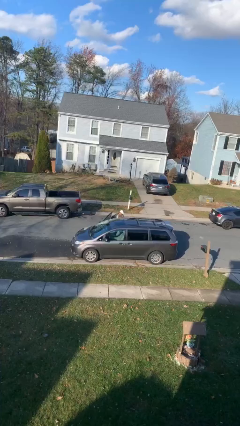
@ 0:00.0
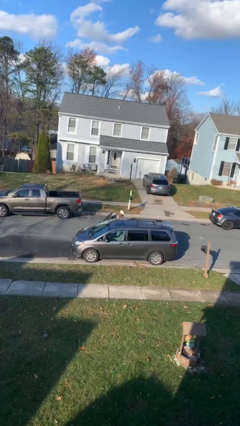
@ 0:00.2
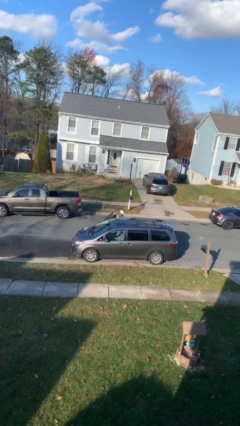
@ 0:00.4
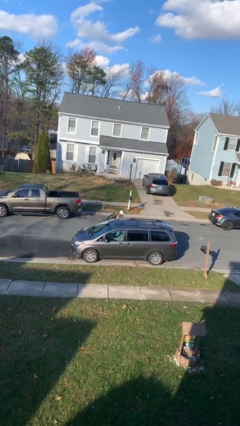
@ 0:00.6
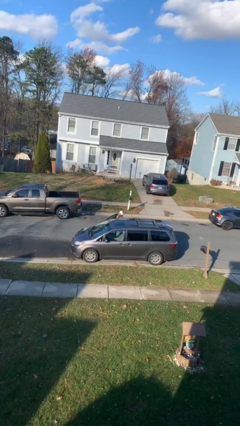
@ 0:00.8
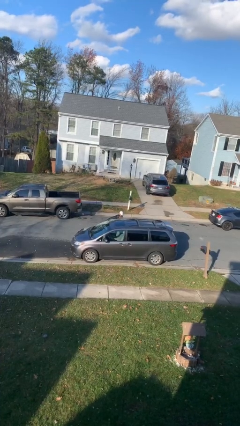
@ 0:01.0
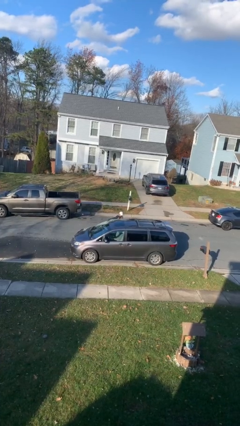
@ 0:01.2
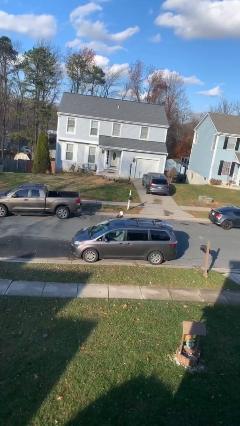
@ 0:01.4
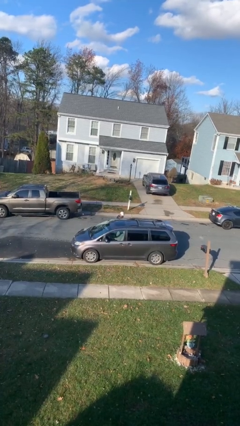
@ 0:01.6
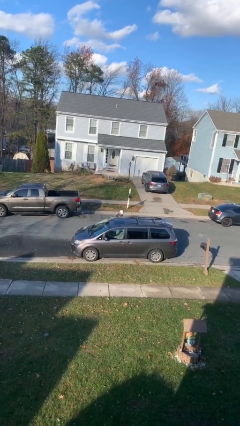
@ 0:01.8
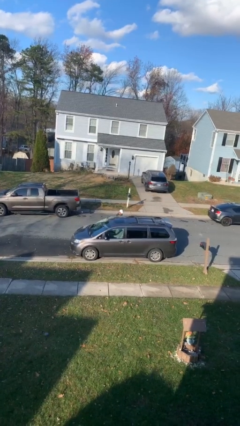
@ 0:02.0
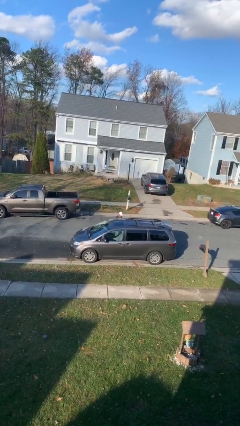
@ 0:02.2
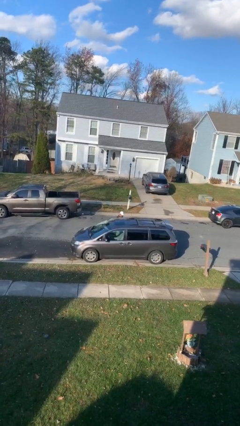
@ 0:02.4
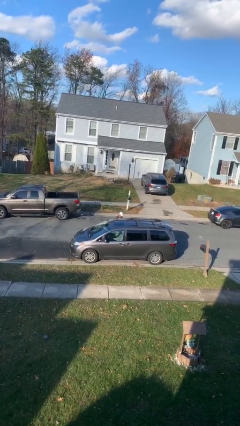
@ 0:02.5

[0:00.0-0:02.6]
person closes car door

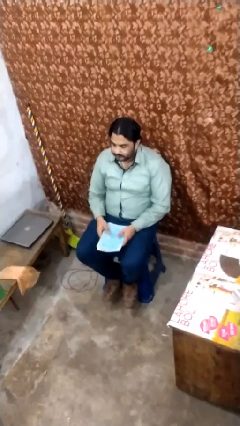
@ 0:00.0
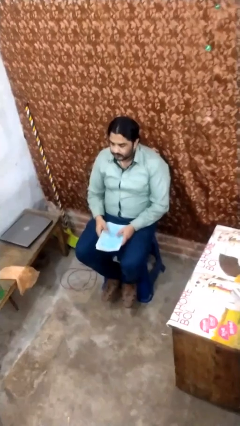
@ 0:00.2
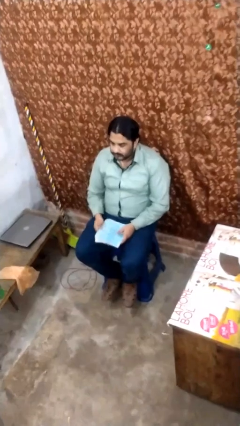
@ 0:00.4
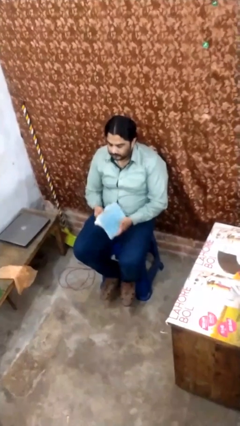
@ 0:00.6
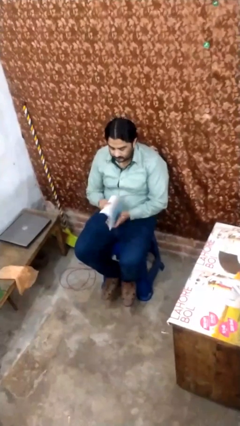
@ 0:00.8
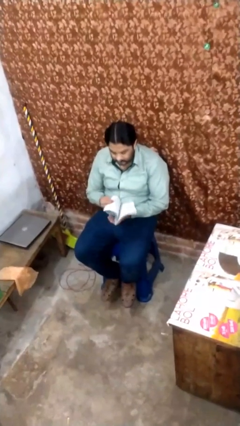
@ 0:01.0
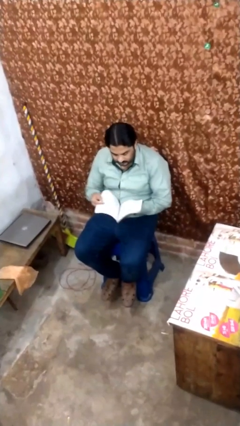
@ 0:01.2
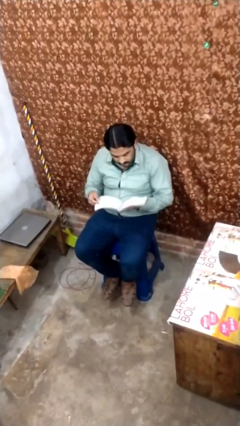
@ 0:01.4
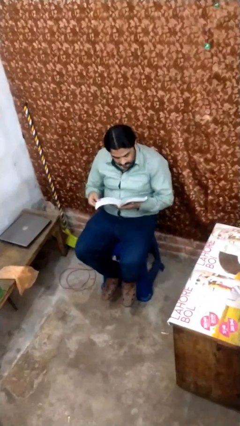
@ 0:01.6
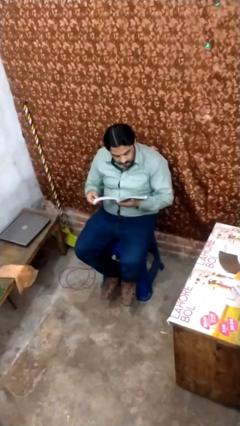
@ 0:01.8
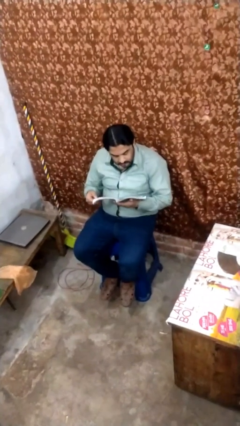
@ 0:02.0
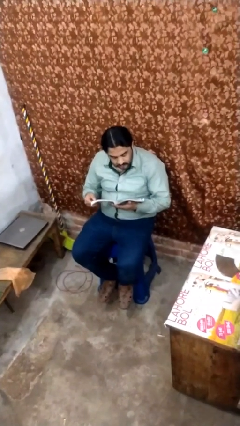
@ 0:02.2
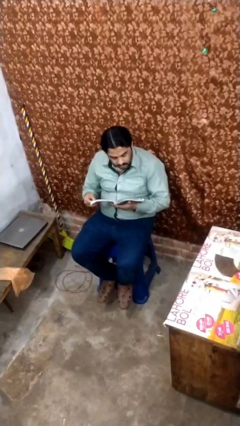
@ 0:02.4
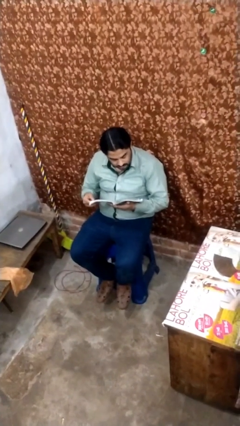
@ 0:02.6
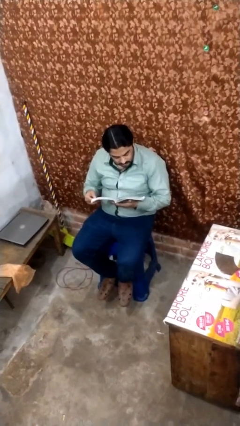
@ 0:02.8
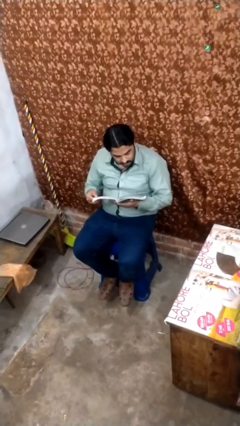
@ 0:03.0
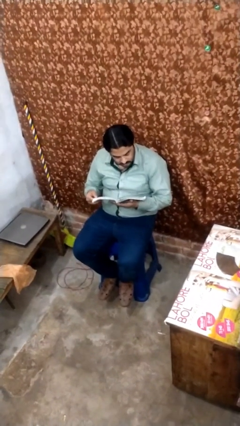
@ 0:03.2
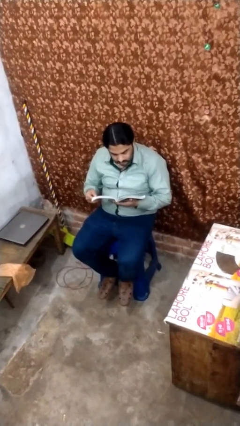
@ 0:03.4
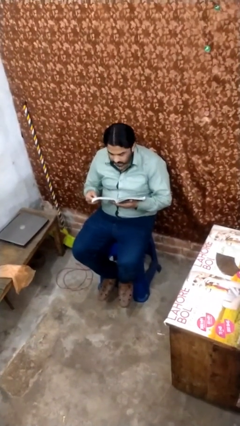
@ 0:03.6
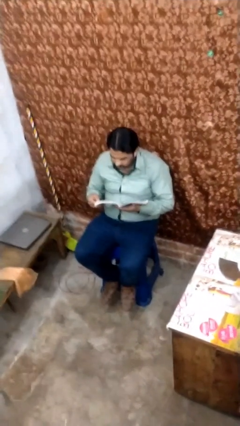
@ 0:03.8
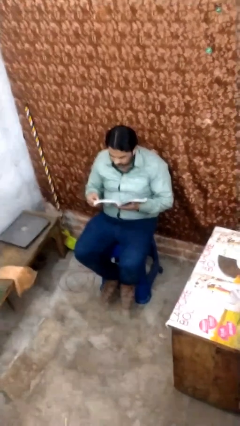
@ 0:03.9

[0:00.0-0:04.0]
person reads document

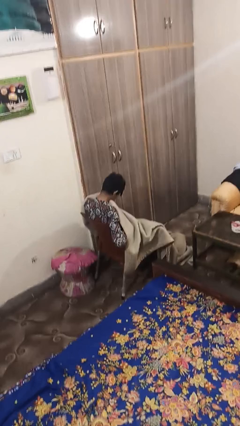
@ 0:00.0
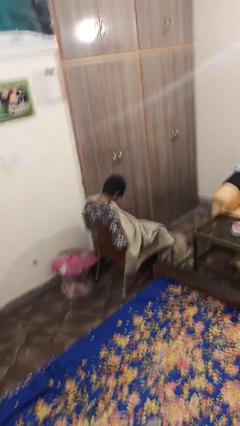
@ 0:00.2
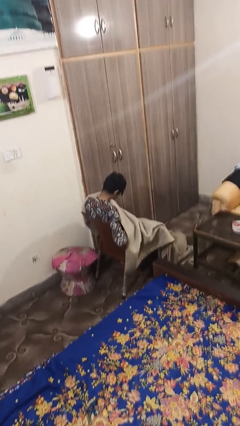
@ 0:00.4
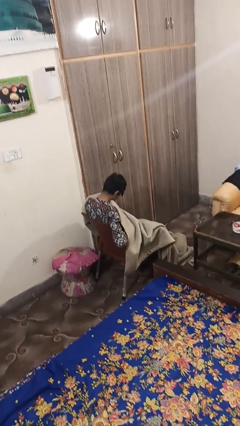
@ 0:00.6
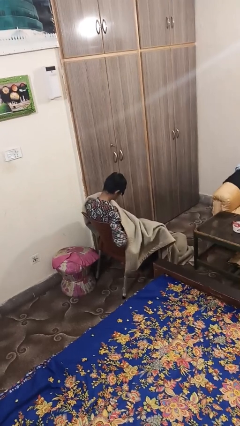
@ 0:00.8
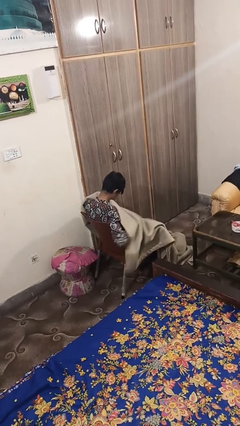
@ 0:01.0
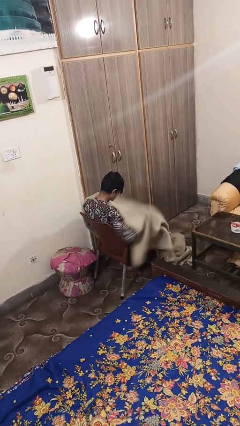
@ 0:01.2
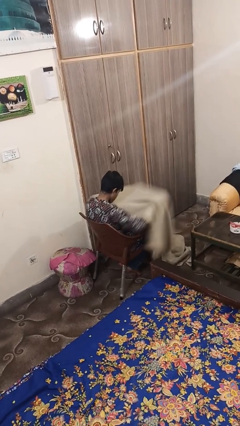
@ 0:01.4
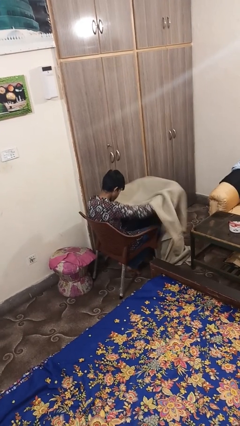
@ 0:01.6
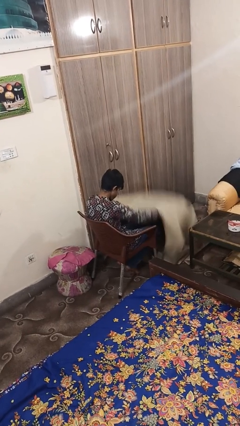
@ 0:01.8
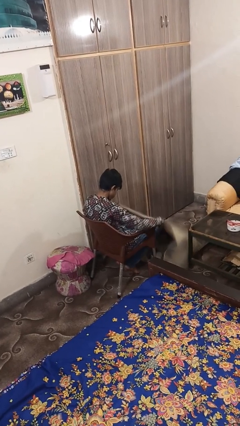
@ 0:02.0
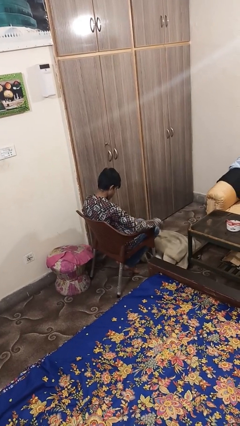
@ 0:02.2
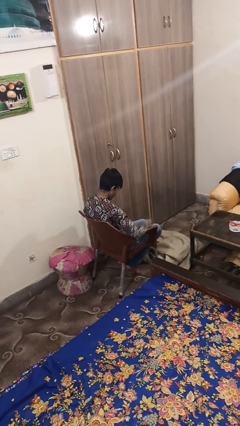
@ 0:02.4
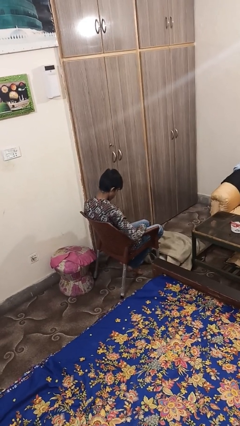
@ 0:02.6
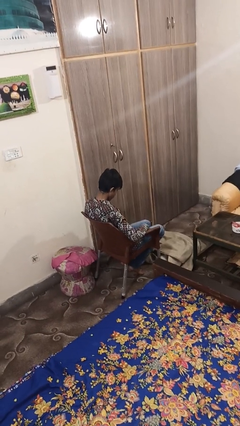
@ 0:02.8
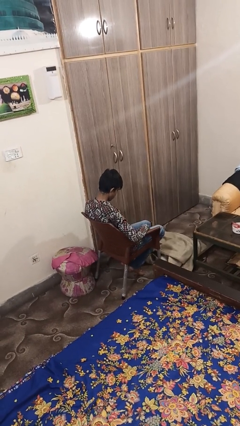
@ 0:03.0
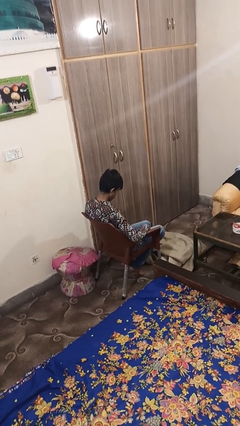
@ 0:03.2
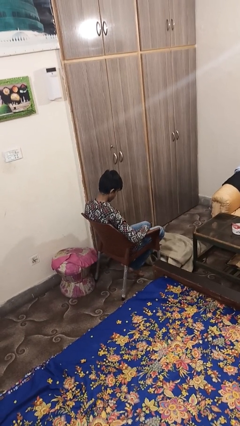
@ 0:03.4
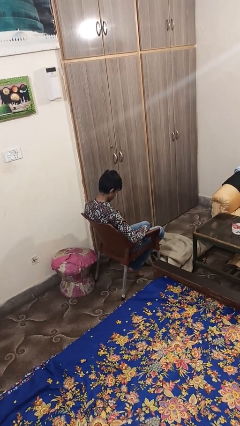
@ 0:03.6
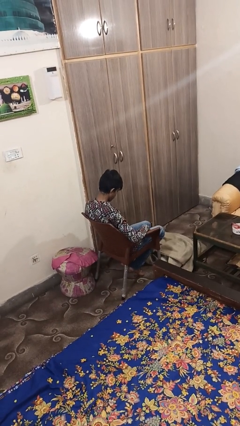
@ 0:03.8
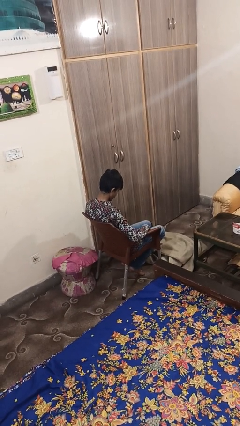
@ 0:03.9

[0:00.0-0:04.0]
person uncovers with blanket

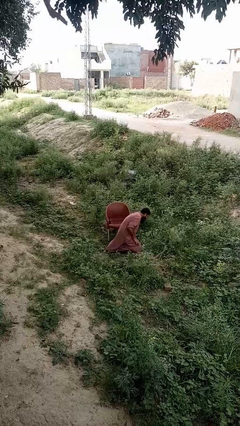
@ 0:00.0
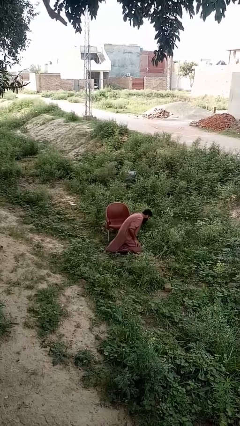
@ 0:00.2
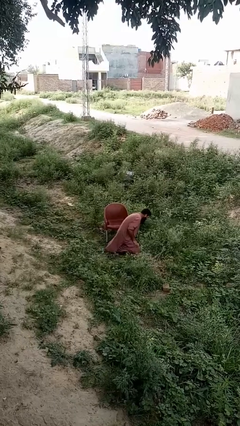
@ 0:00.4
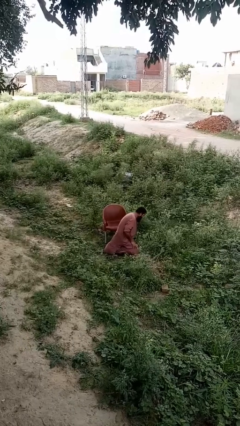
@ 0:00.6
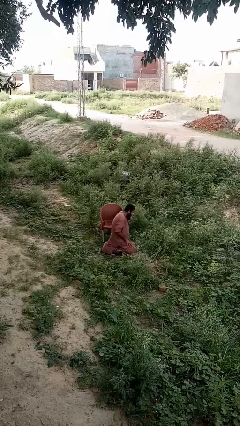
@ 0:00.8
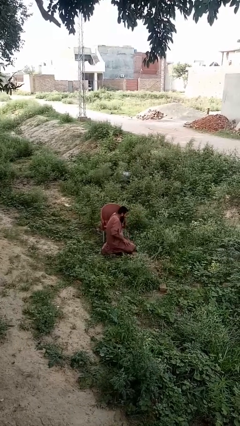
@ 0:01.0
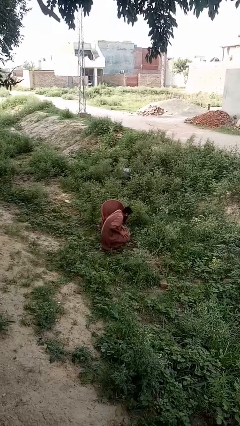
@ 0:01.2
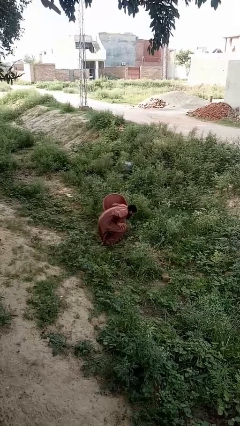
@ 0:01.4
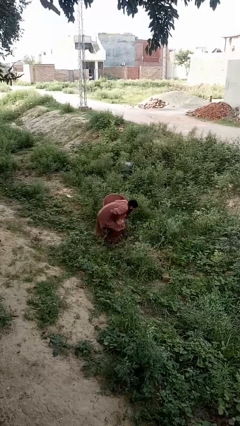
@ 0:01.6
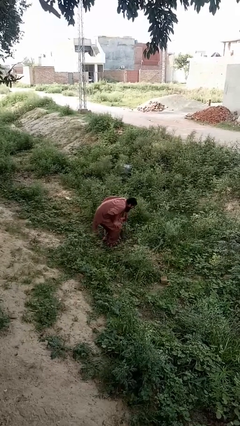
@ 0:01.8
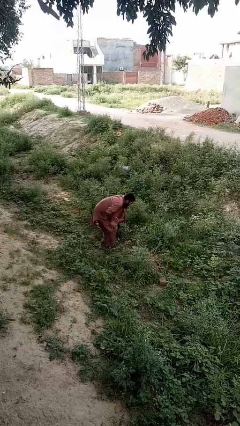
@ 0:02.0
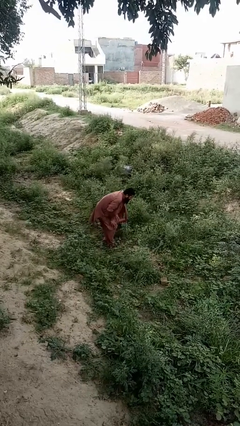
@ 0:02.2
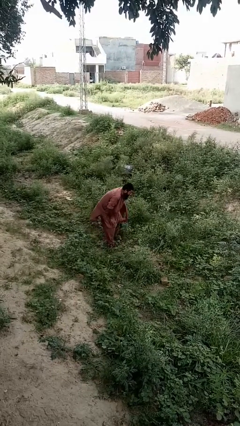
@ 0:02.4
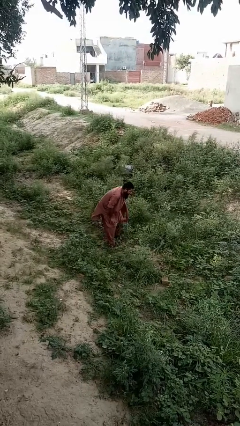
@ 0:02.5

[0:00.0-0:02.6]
person stands up from floor

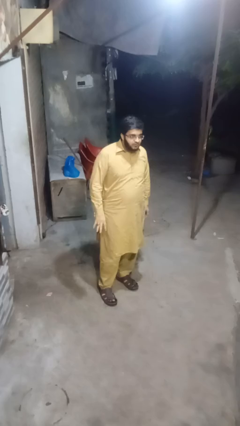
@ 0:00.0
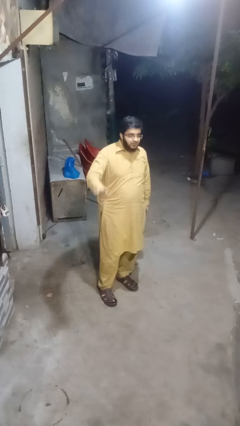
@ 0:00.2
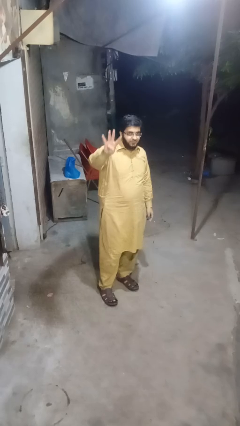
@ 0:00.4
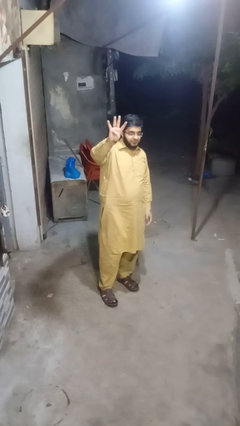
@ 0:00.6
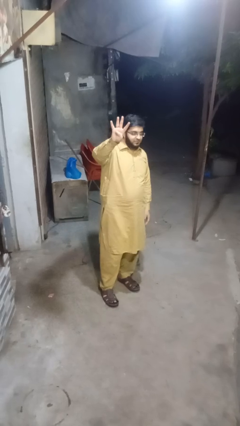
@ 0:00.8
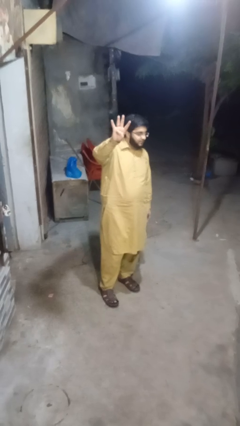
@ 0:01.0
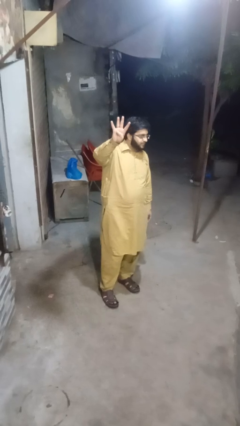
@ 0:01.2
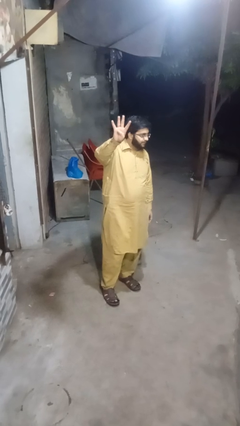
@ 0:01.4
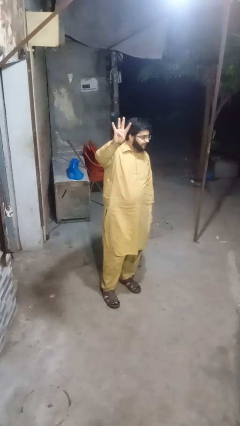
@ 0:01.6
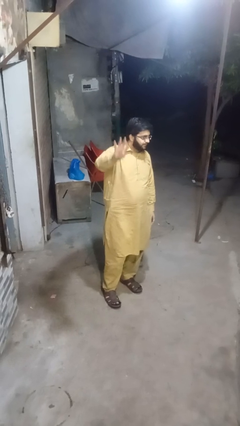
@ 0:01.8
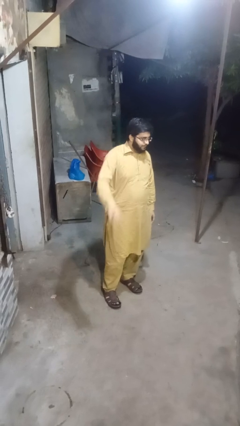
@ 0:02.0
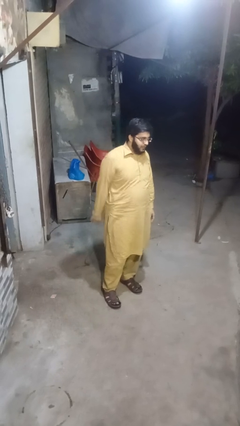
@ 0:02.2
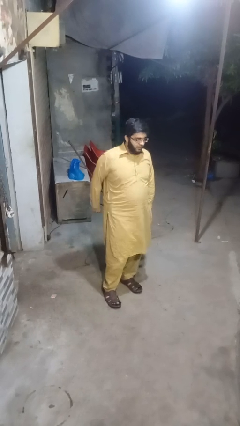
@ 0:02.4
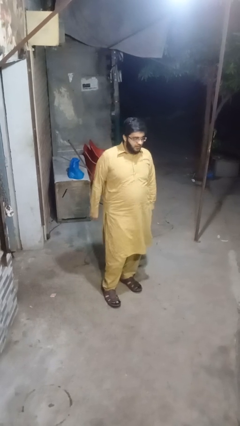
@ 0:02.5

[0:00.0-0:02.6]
person gestures number four

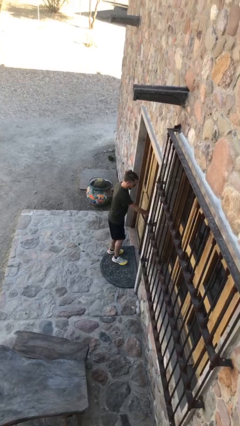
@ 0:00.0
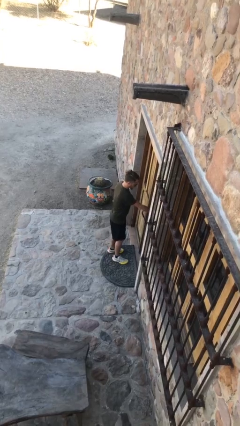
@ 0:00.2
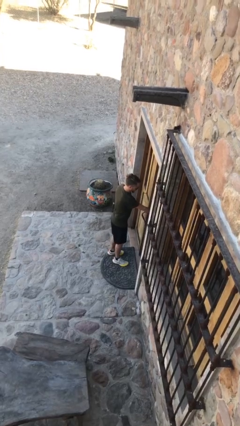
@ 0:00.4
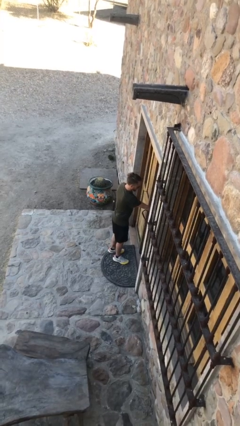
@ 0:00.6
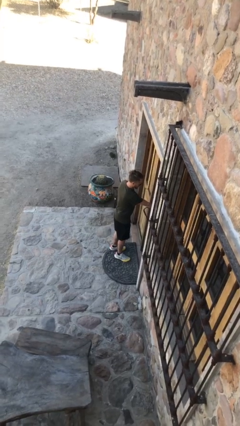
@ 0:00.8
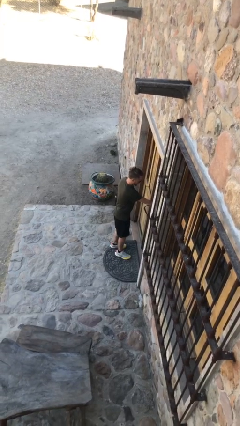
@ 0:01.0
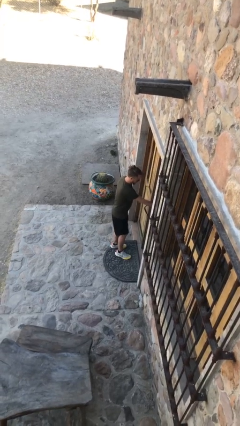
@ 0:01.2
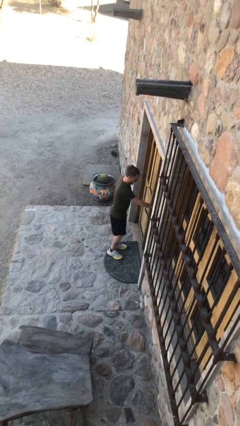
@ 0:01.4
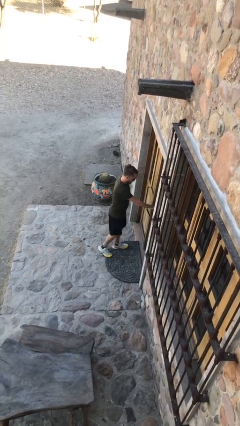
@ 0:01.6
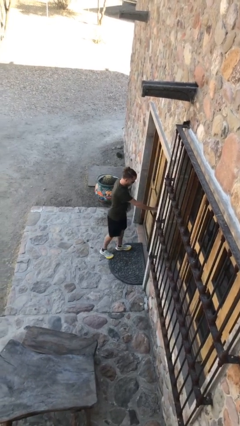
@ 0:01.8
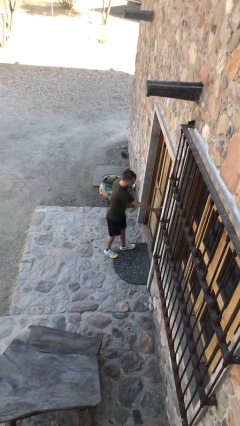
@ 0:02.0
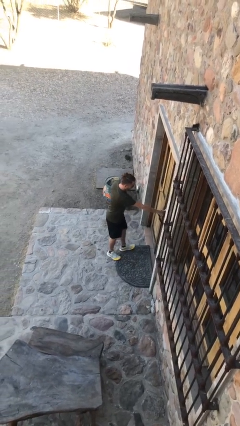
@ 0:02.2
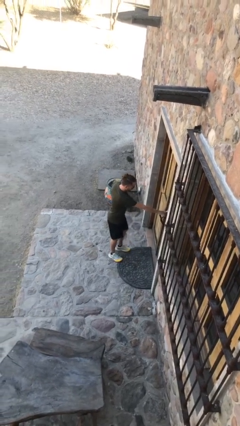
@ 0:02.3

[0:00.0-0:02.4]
person closes facility door
